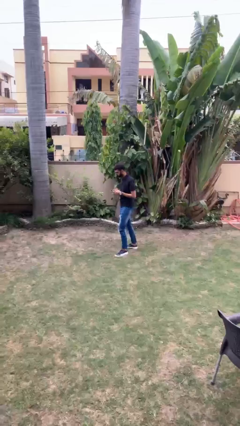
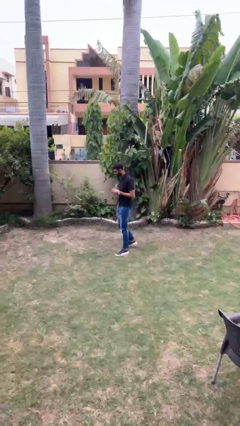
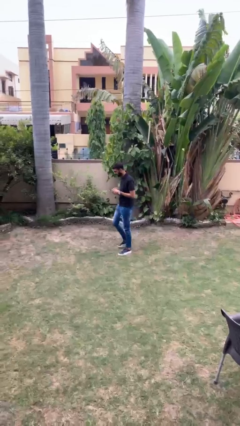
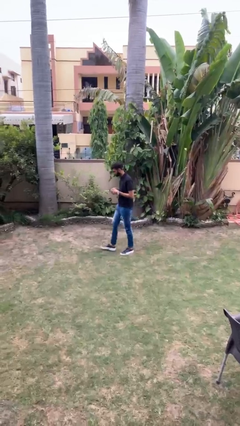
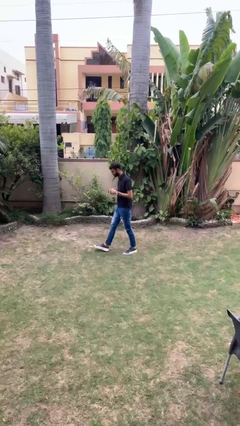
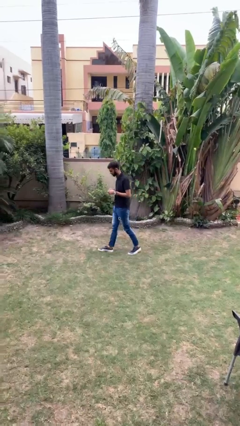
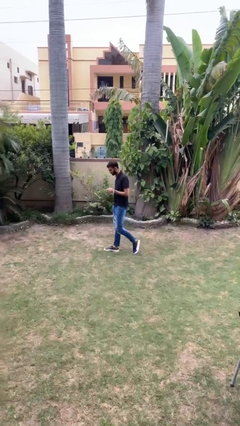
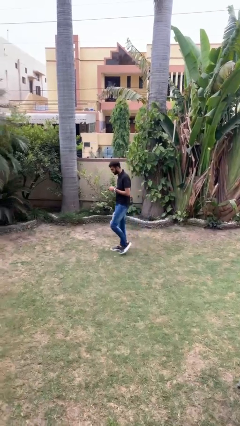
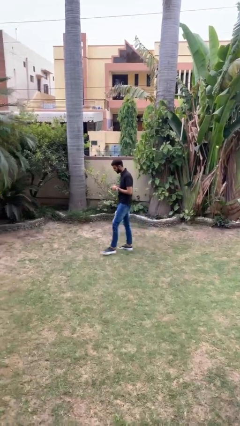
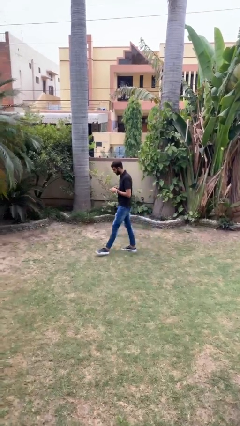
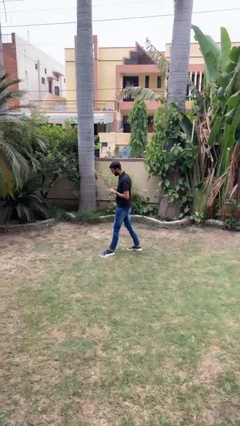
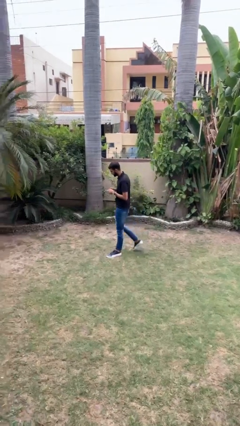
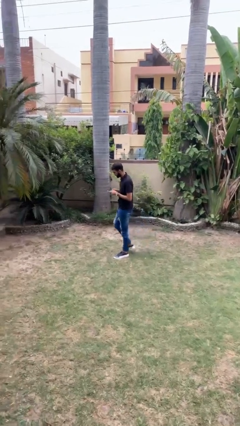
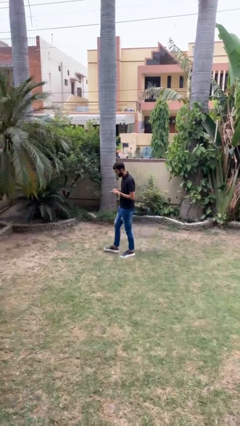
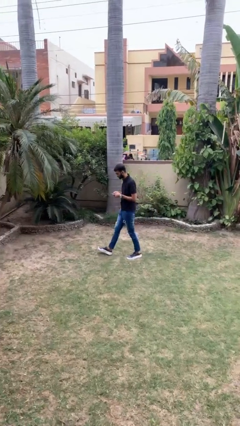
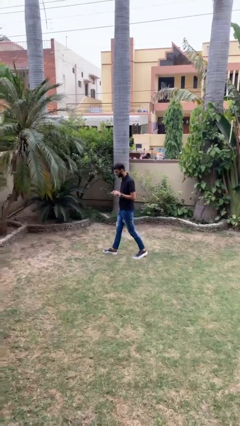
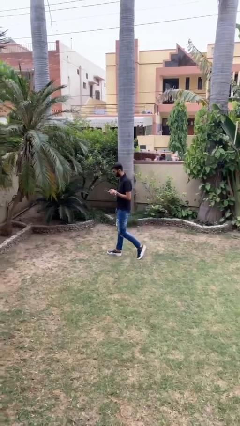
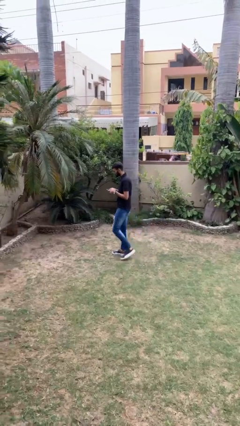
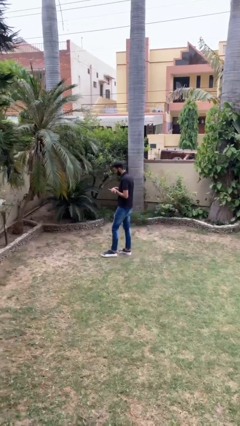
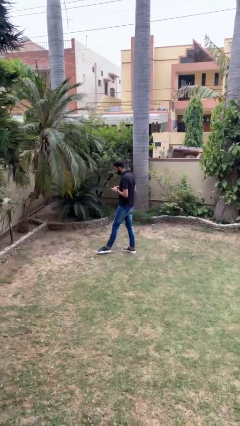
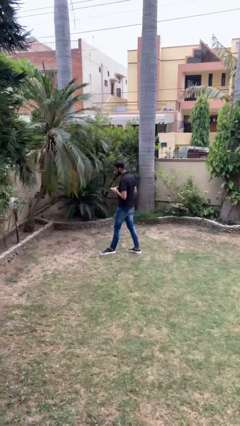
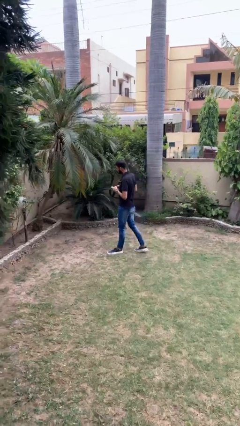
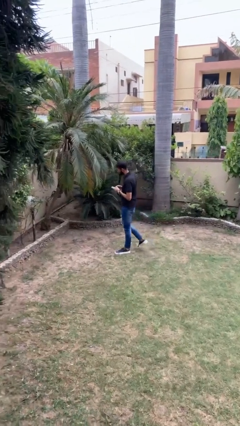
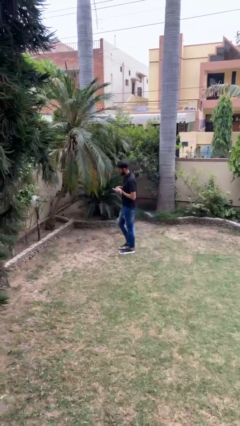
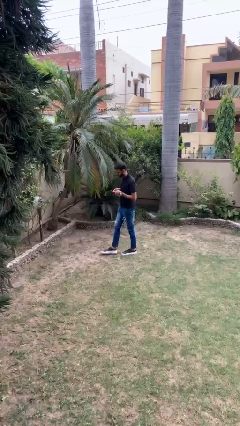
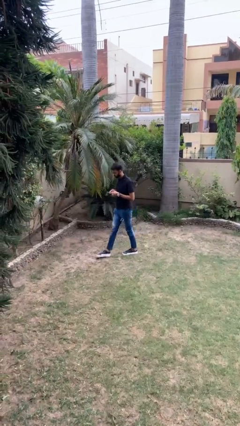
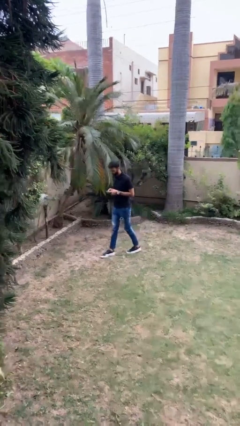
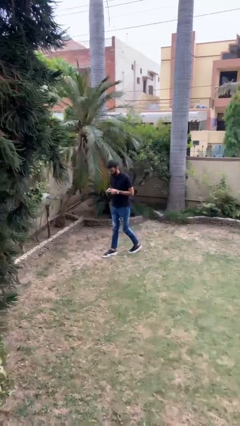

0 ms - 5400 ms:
person texts on phone

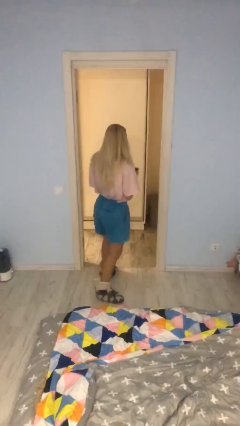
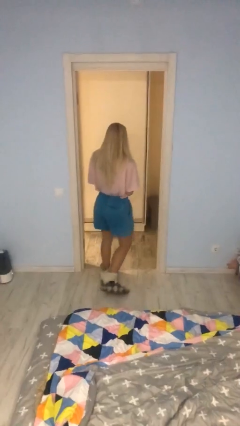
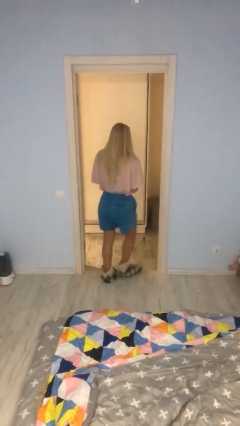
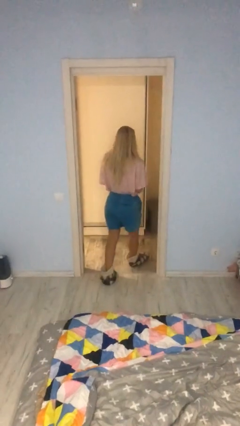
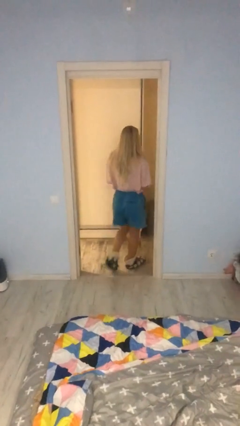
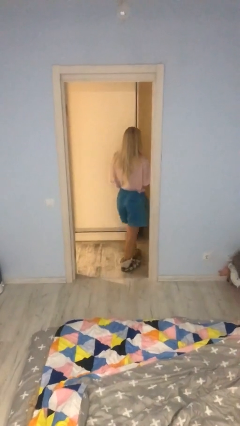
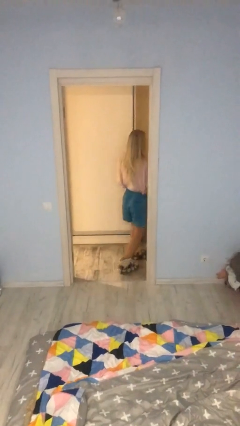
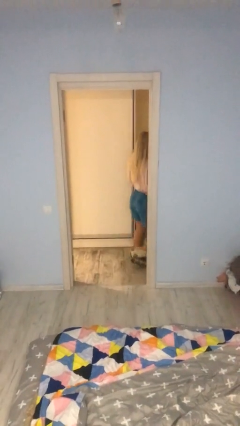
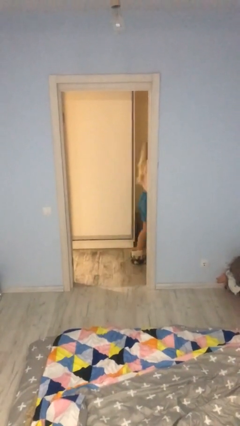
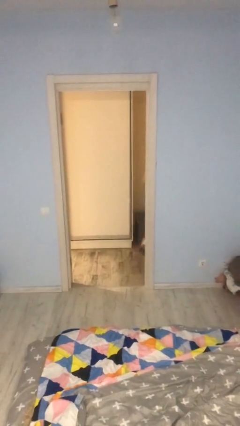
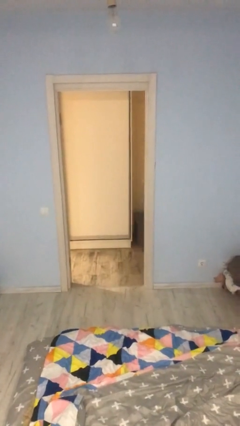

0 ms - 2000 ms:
person exits scene through structure

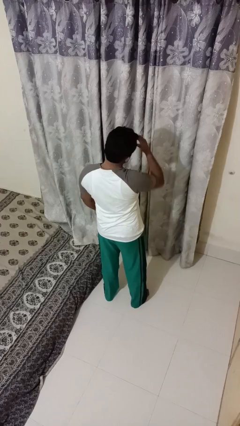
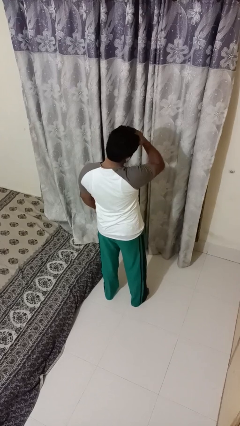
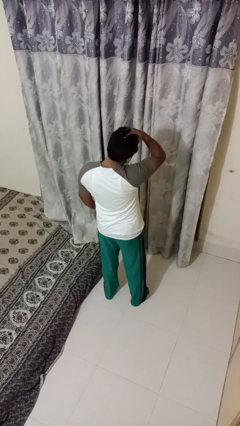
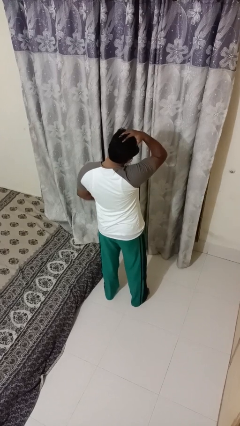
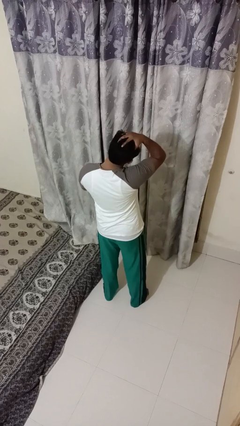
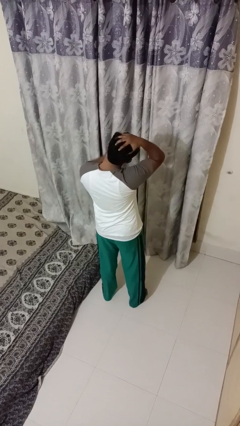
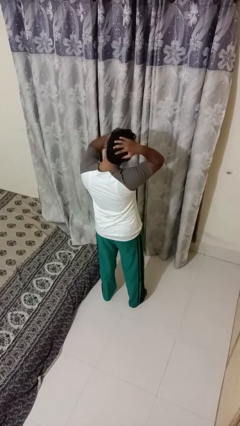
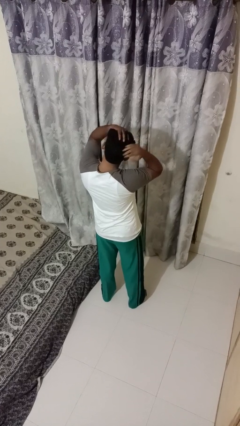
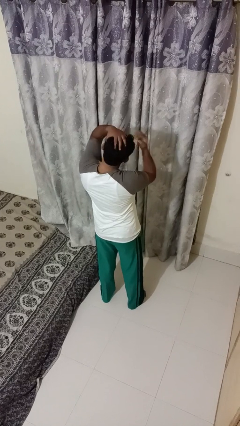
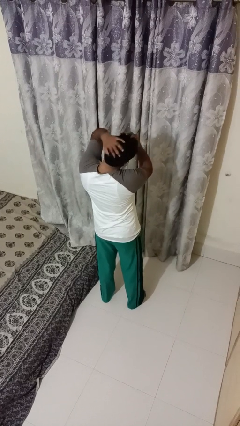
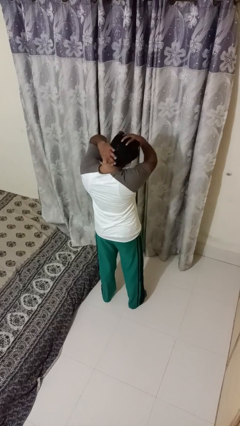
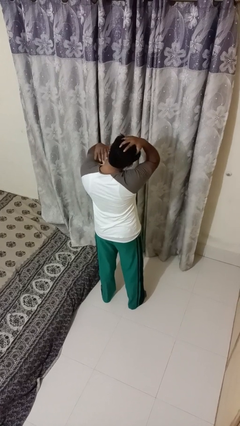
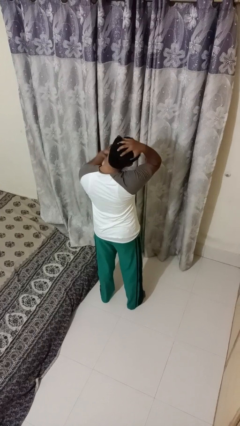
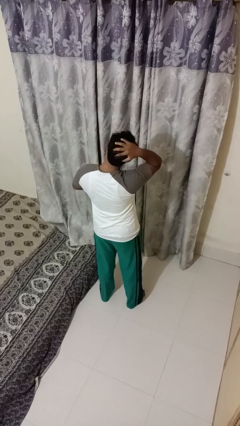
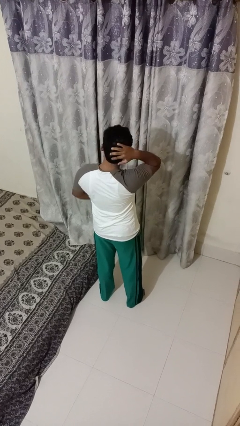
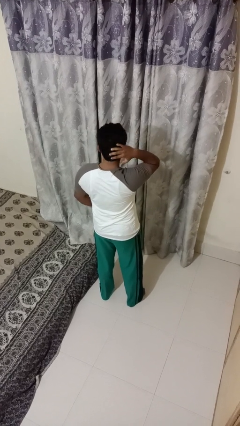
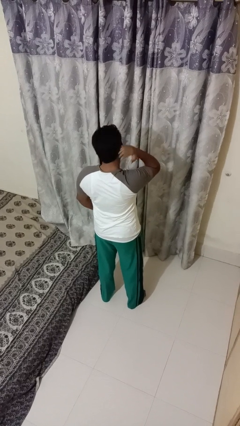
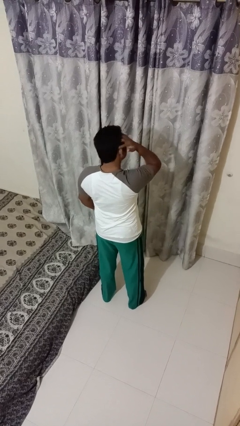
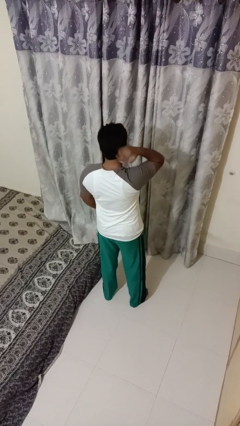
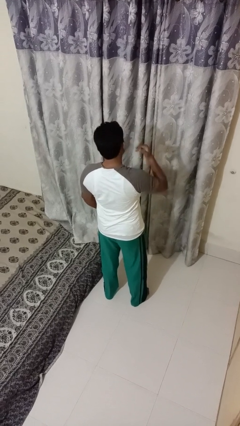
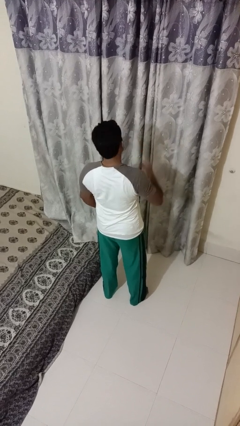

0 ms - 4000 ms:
person strokes hair

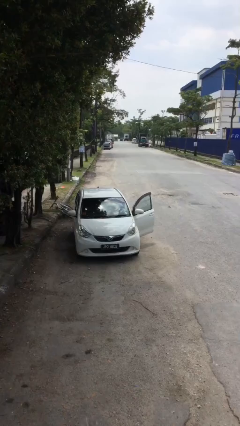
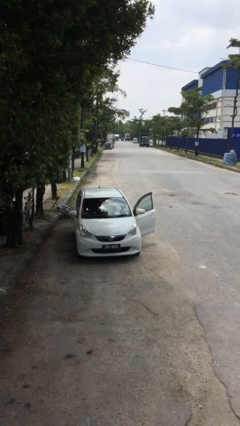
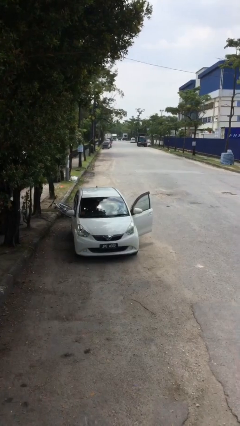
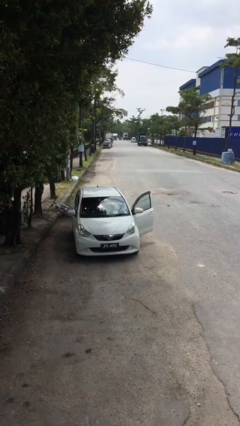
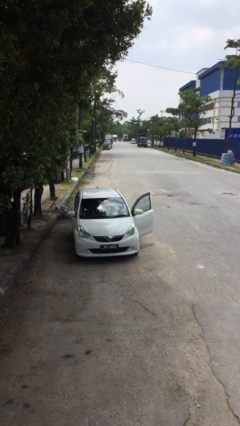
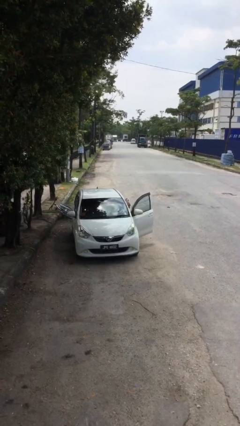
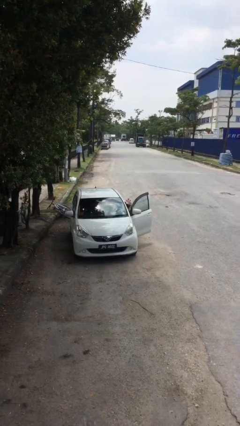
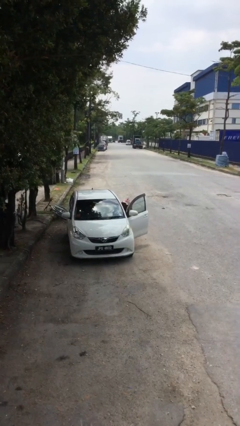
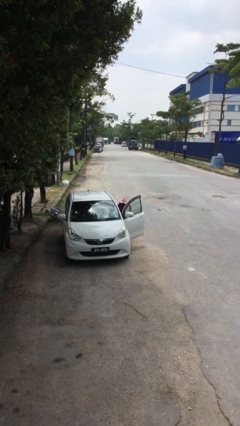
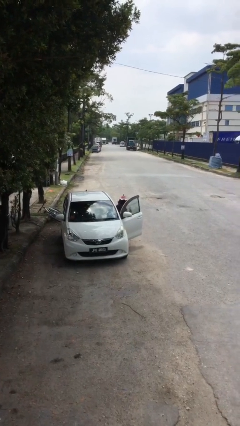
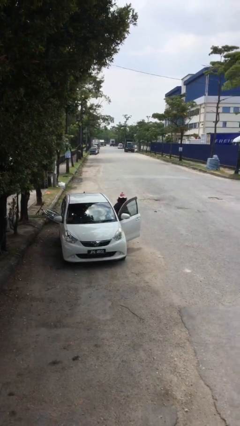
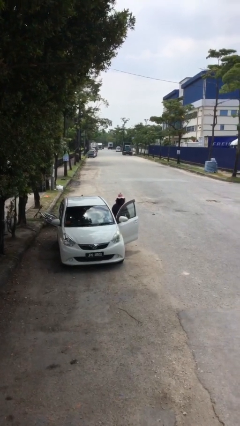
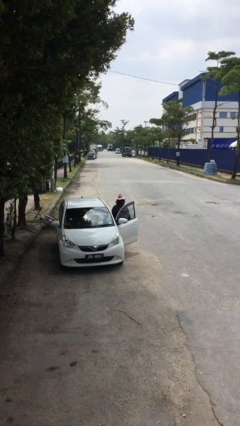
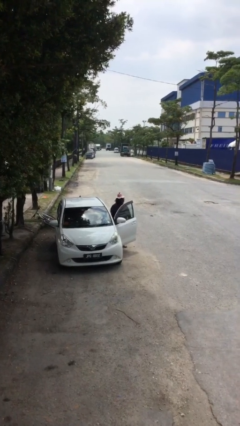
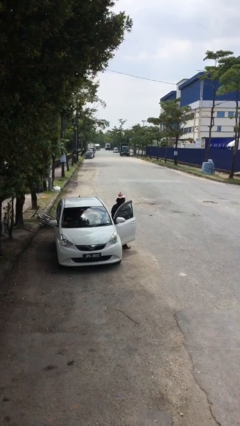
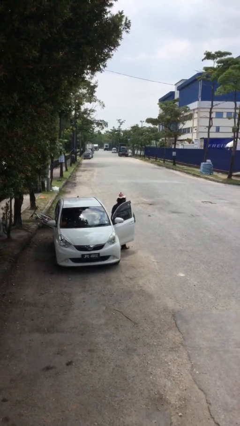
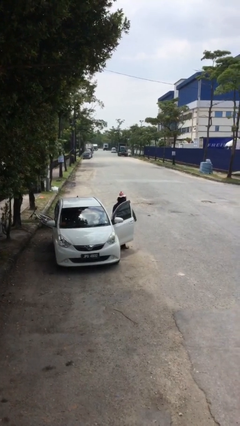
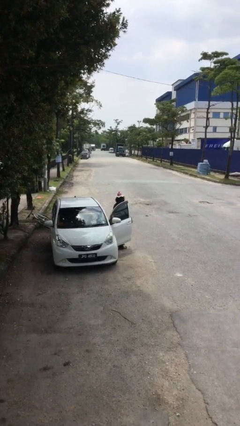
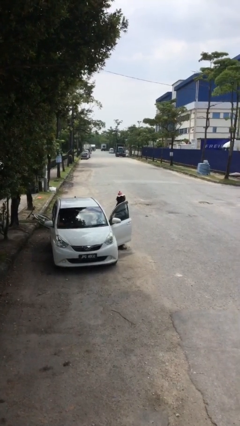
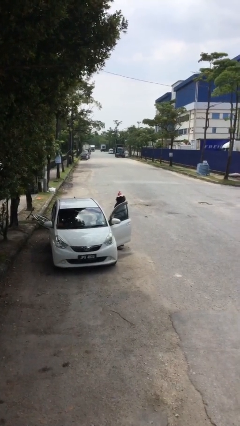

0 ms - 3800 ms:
person exits car

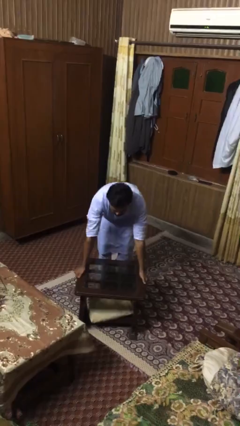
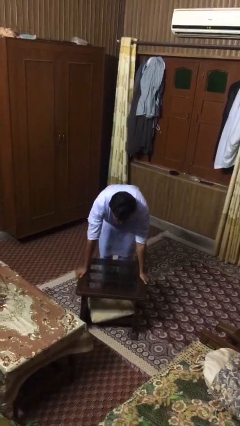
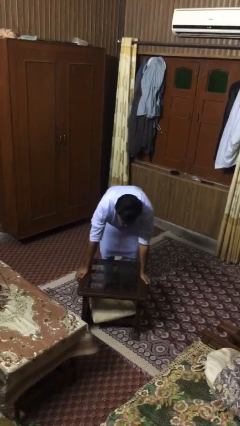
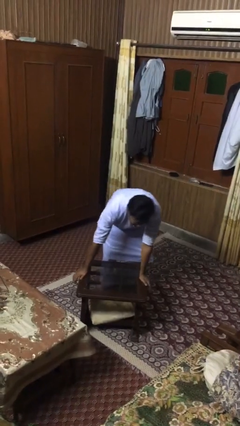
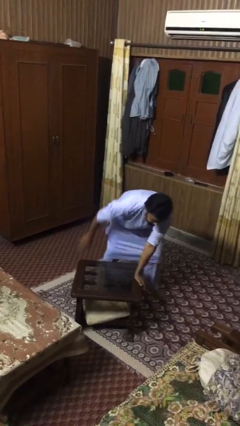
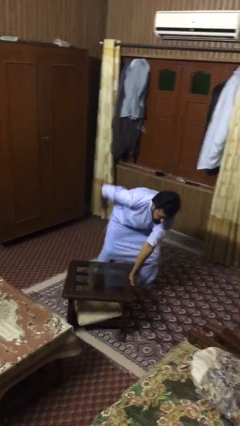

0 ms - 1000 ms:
person puts down object on floor

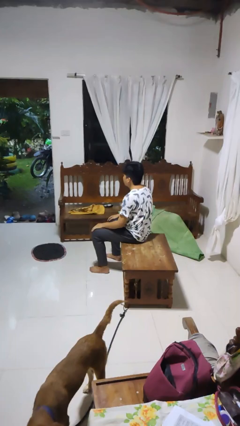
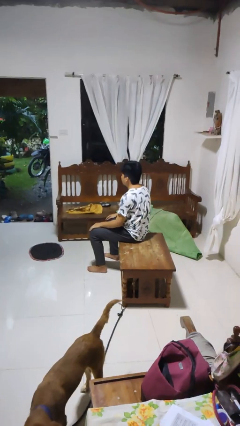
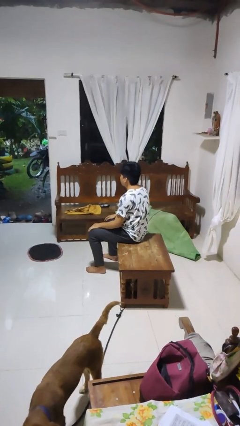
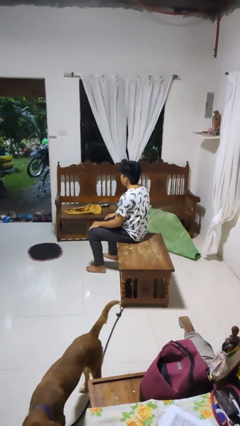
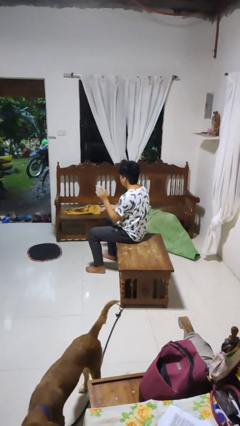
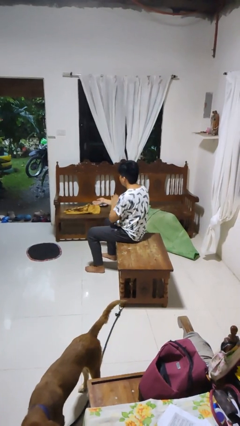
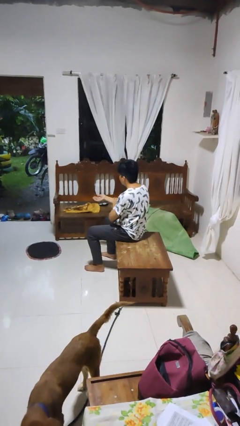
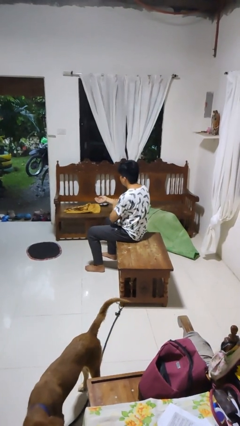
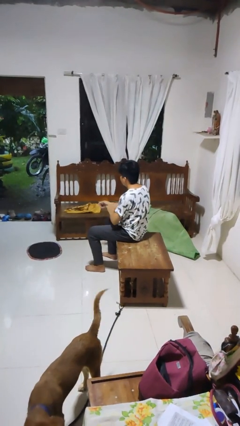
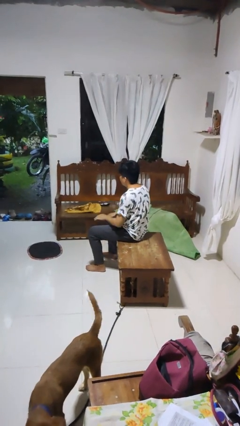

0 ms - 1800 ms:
person swats bug
